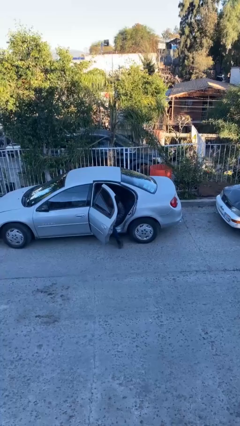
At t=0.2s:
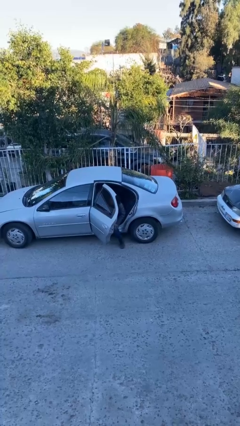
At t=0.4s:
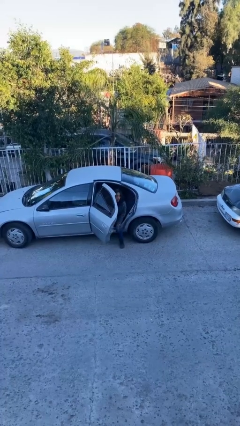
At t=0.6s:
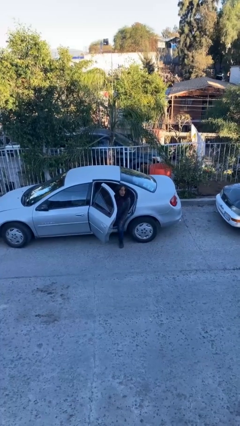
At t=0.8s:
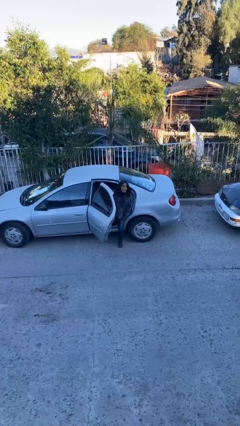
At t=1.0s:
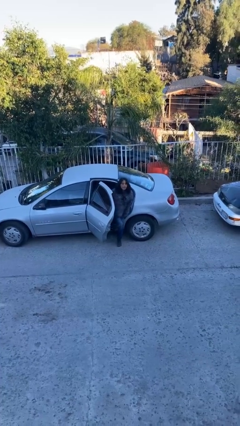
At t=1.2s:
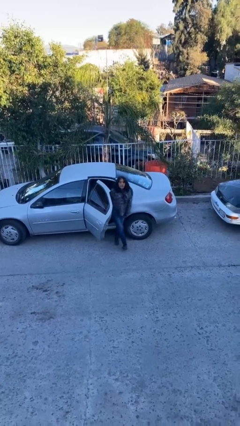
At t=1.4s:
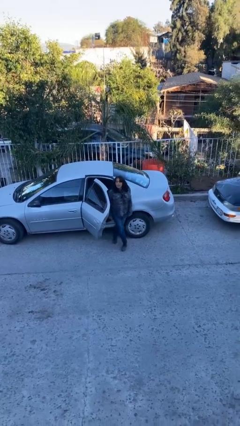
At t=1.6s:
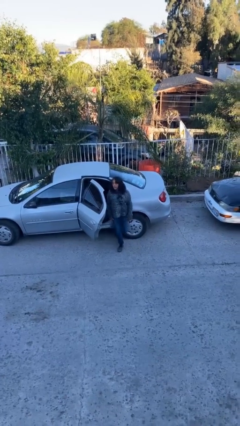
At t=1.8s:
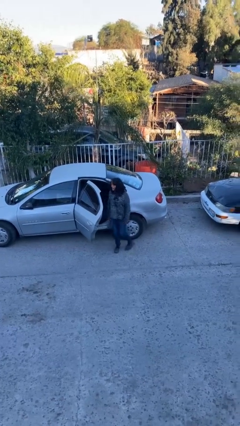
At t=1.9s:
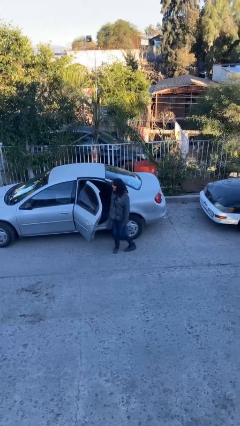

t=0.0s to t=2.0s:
person exits car

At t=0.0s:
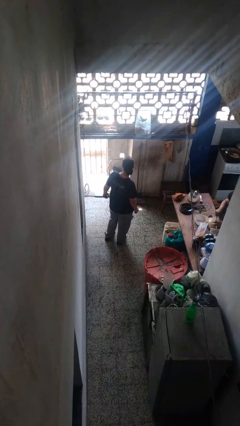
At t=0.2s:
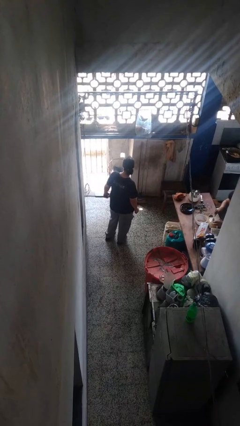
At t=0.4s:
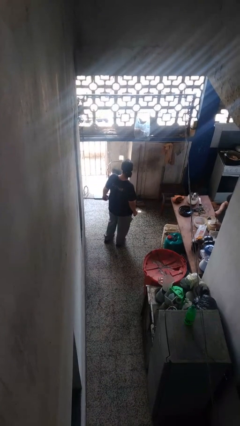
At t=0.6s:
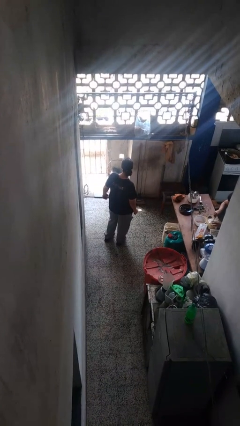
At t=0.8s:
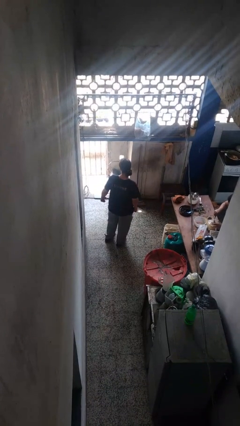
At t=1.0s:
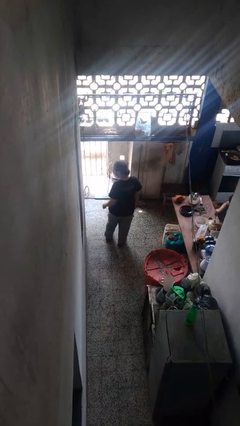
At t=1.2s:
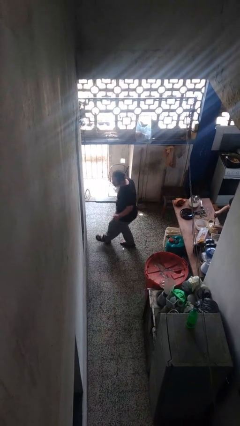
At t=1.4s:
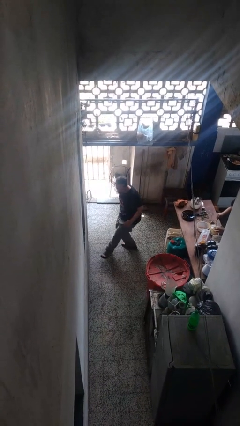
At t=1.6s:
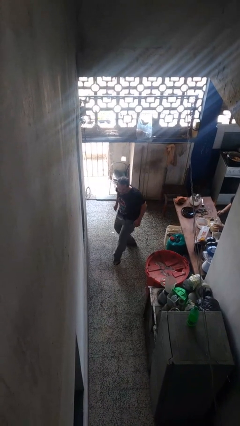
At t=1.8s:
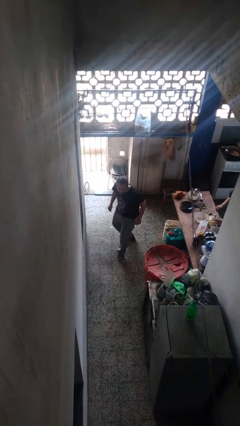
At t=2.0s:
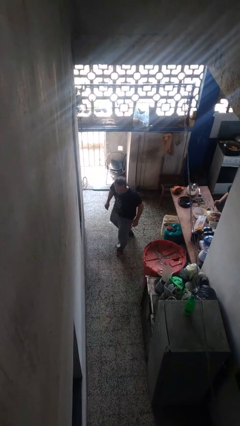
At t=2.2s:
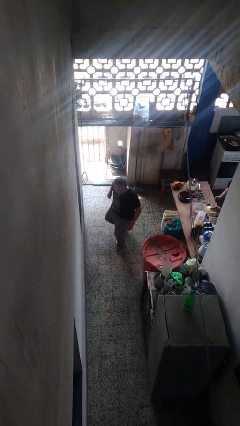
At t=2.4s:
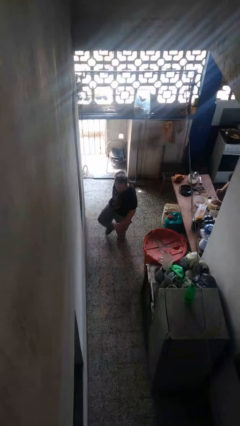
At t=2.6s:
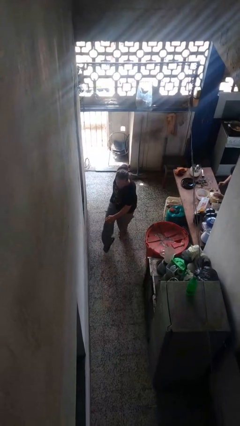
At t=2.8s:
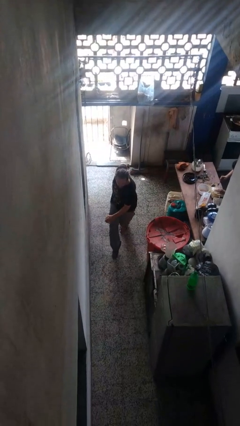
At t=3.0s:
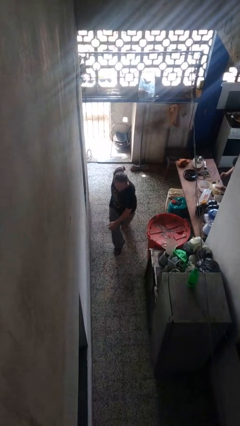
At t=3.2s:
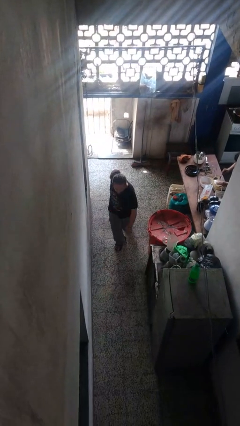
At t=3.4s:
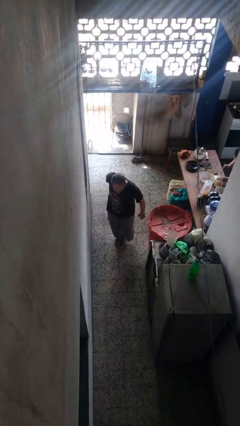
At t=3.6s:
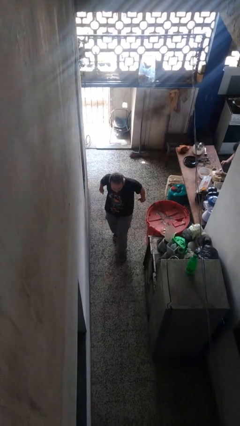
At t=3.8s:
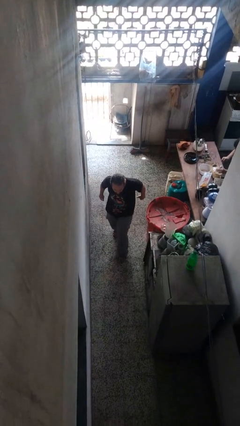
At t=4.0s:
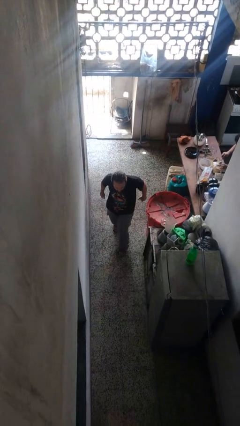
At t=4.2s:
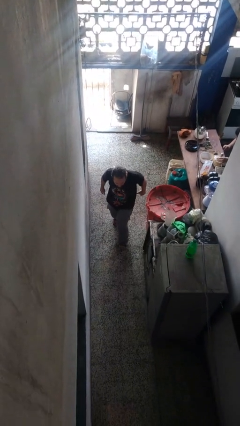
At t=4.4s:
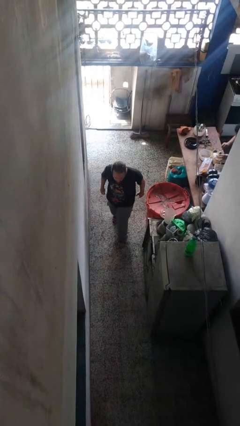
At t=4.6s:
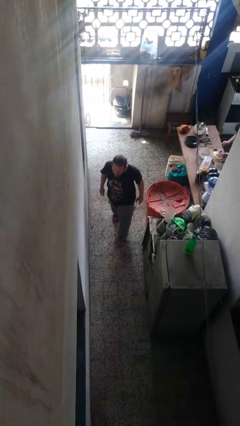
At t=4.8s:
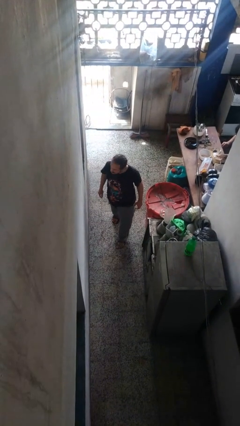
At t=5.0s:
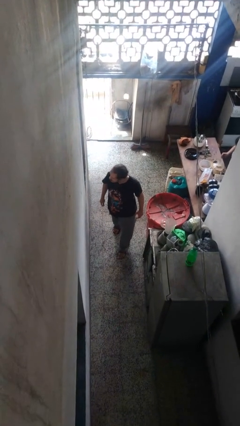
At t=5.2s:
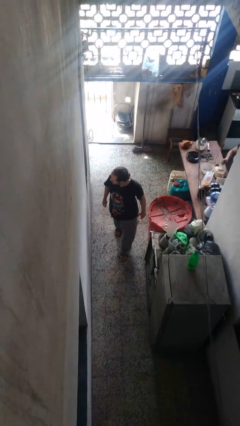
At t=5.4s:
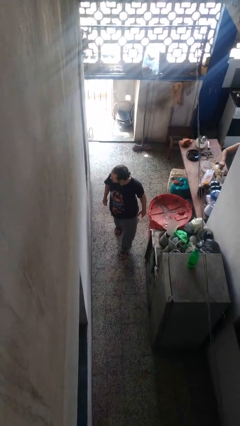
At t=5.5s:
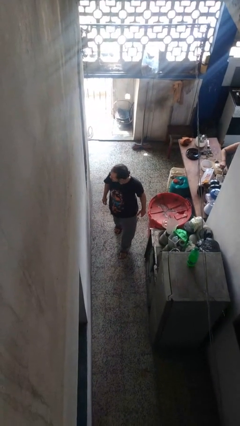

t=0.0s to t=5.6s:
person walks tiptoe

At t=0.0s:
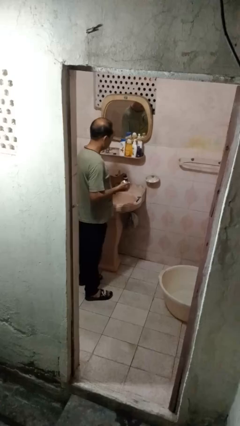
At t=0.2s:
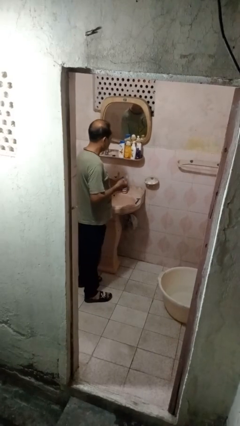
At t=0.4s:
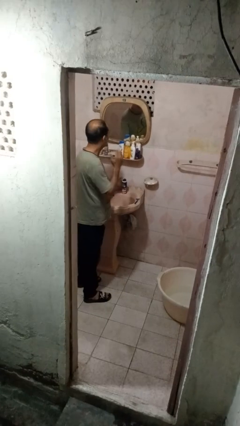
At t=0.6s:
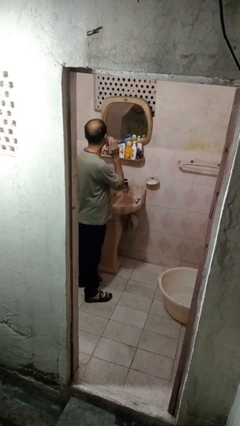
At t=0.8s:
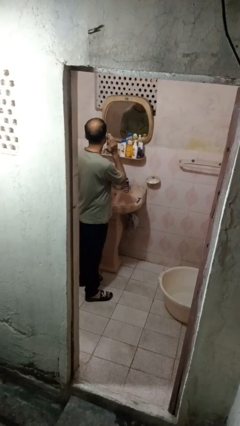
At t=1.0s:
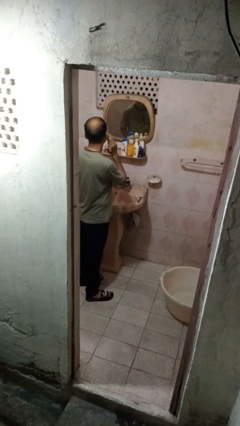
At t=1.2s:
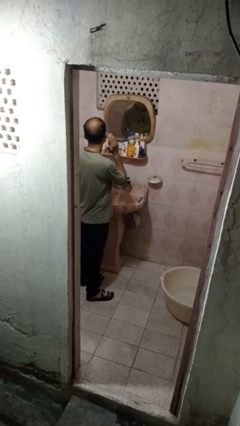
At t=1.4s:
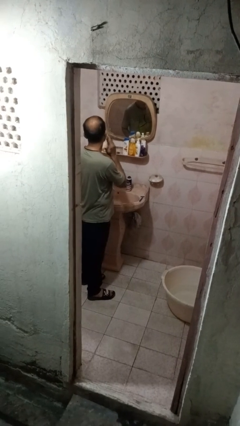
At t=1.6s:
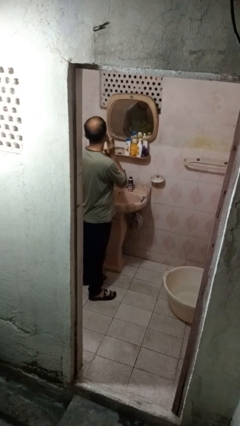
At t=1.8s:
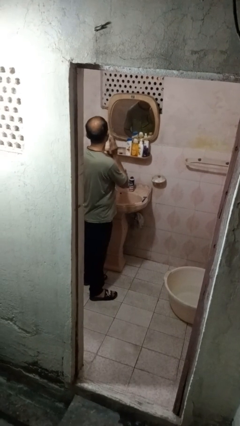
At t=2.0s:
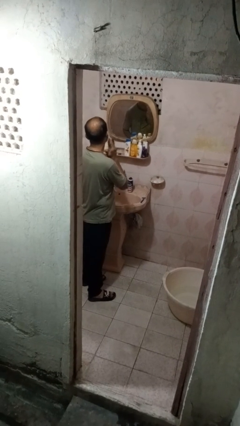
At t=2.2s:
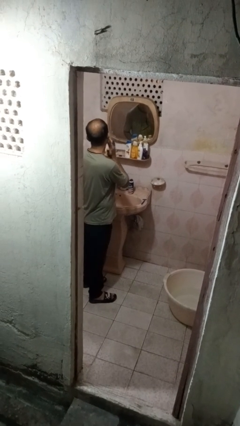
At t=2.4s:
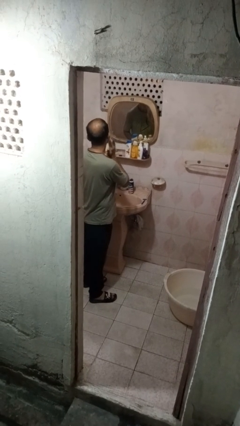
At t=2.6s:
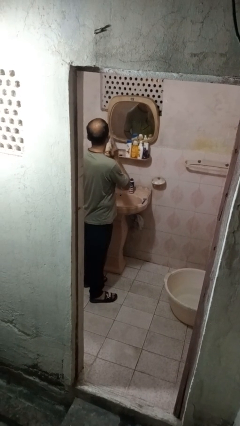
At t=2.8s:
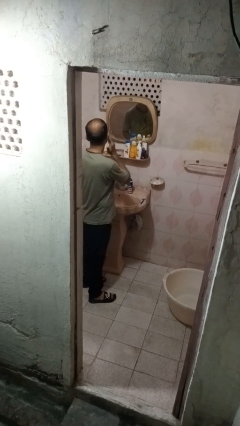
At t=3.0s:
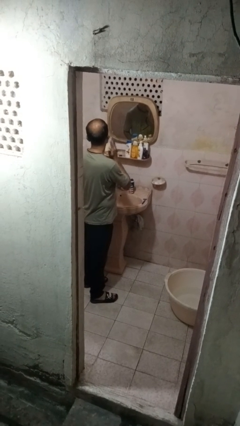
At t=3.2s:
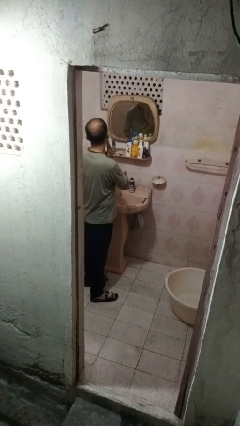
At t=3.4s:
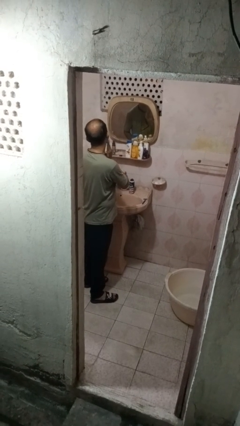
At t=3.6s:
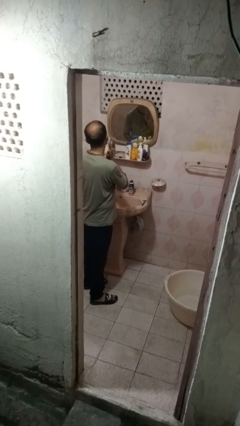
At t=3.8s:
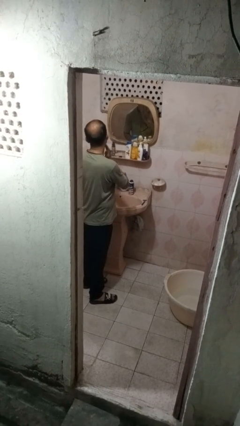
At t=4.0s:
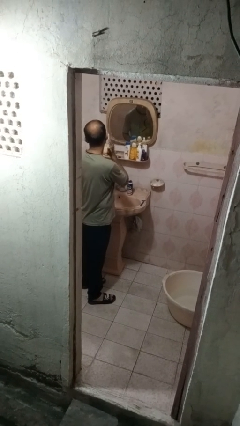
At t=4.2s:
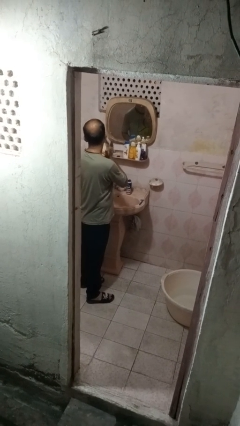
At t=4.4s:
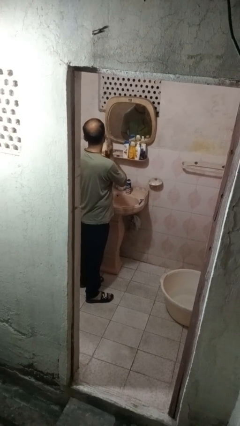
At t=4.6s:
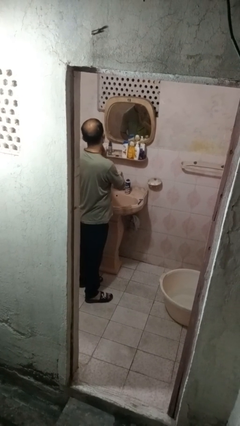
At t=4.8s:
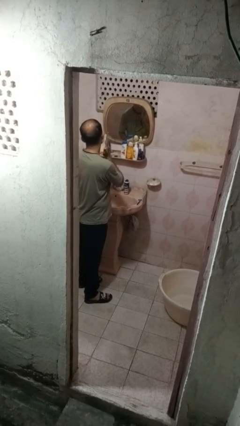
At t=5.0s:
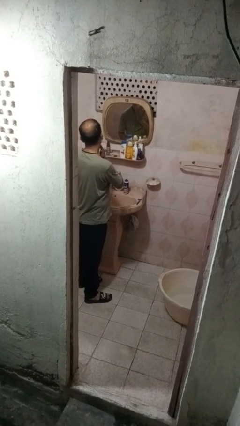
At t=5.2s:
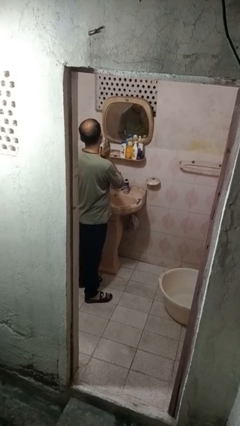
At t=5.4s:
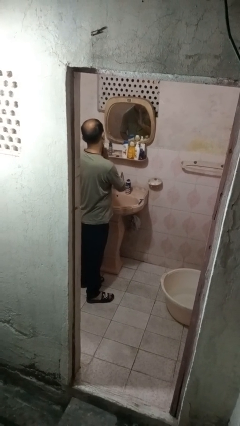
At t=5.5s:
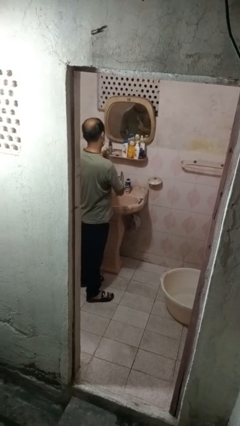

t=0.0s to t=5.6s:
person applies shaving cream

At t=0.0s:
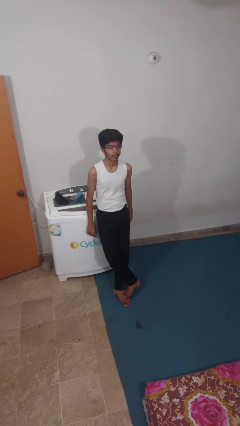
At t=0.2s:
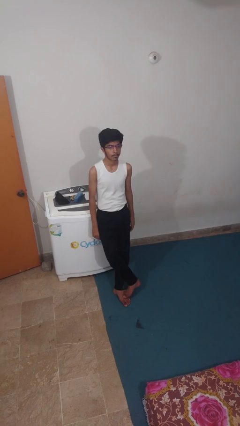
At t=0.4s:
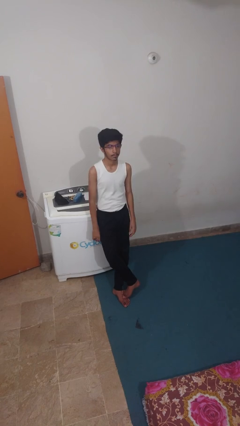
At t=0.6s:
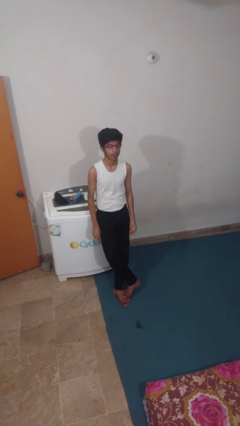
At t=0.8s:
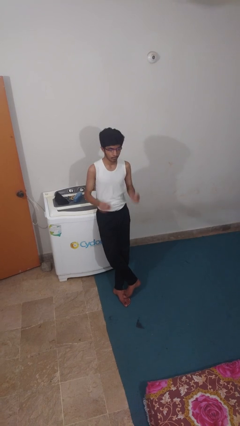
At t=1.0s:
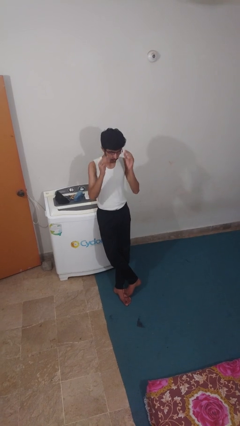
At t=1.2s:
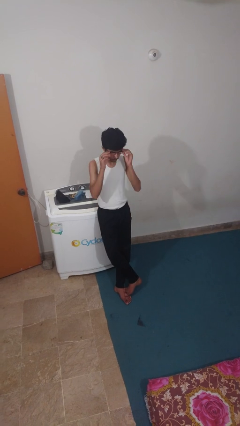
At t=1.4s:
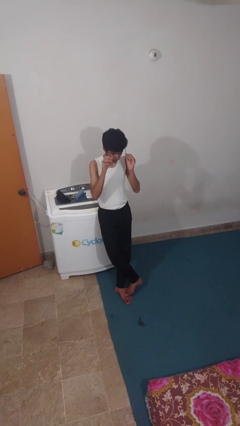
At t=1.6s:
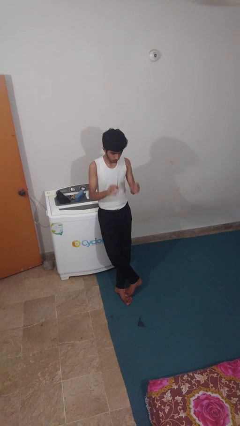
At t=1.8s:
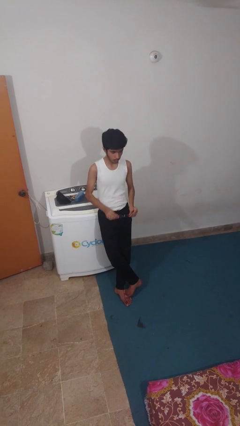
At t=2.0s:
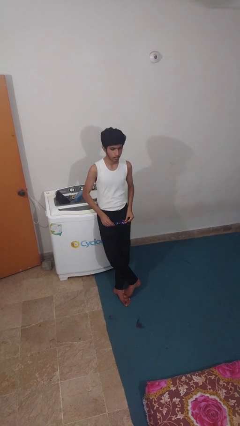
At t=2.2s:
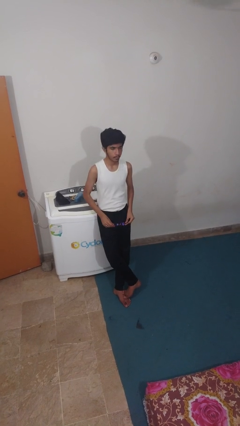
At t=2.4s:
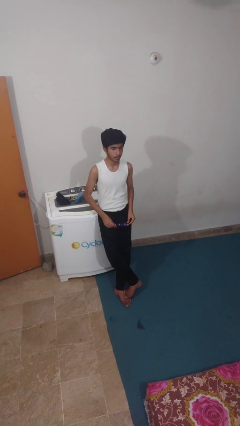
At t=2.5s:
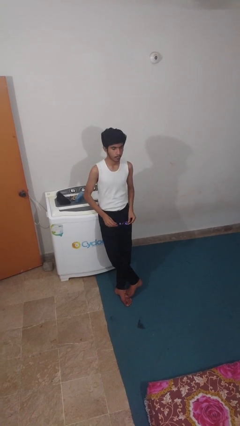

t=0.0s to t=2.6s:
person takes off glasses

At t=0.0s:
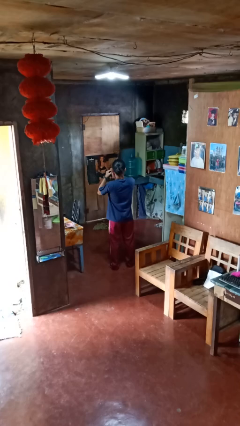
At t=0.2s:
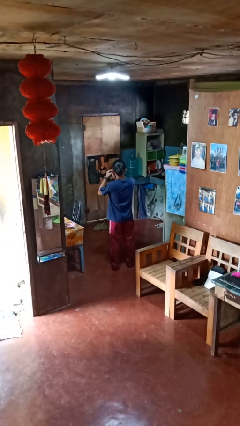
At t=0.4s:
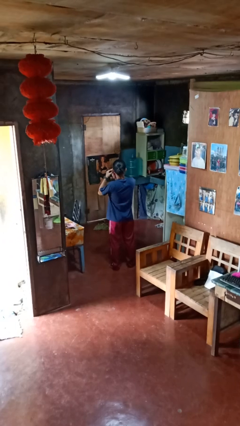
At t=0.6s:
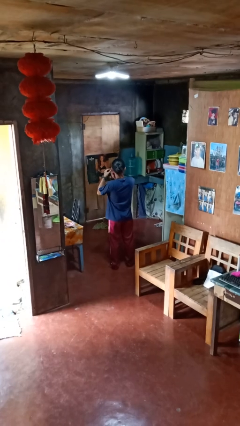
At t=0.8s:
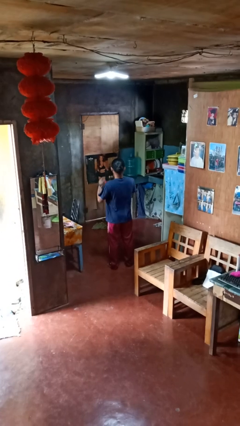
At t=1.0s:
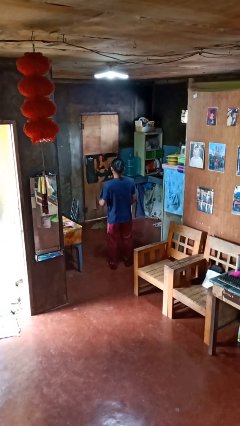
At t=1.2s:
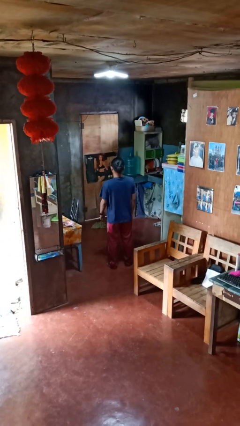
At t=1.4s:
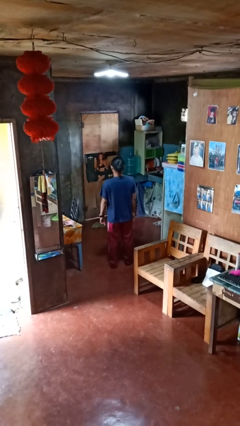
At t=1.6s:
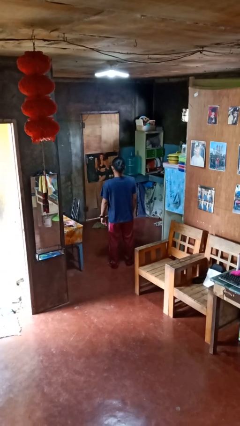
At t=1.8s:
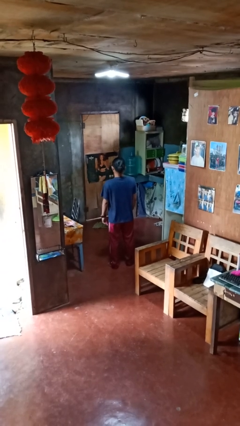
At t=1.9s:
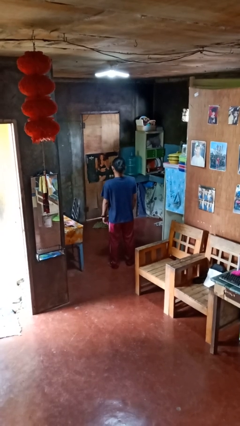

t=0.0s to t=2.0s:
person takes off earrings
